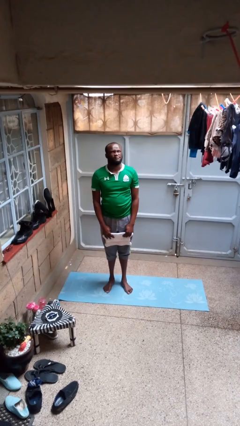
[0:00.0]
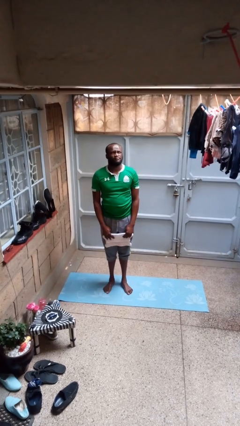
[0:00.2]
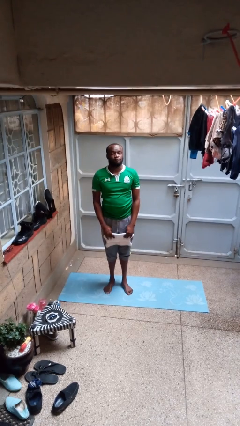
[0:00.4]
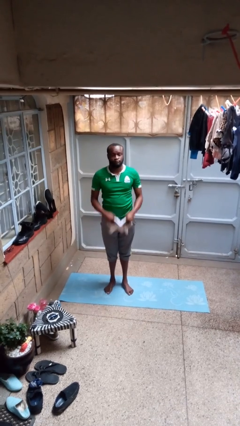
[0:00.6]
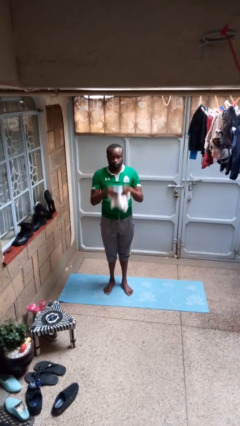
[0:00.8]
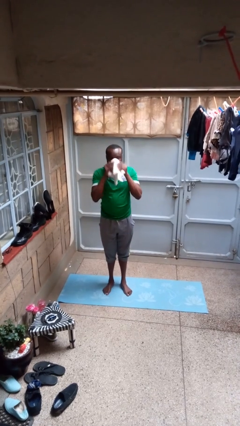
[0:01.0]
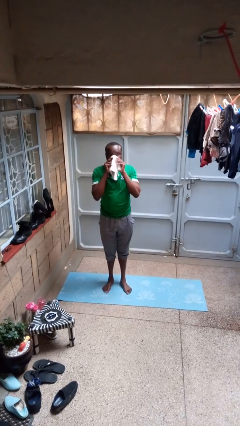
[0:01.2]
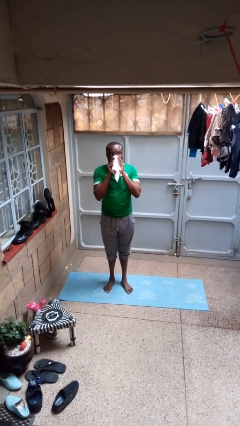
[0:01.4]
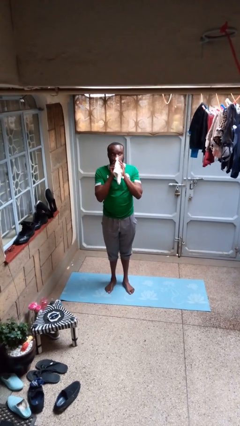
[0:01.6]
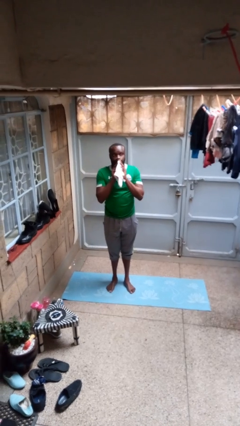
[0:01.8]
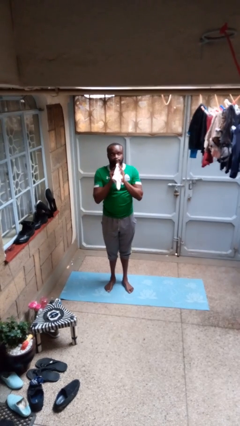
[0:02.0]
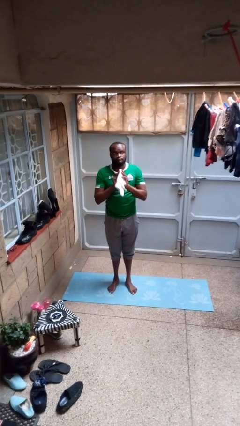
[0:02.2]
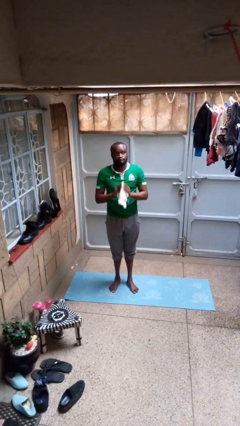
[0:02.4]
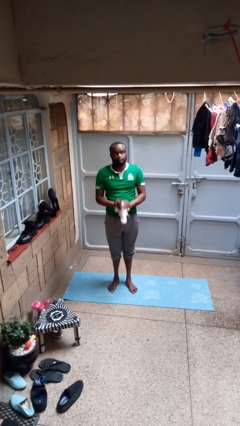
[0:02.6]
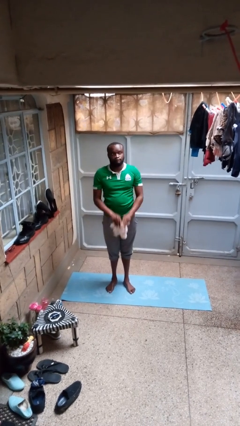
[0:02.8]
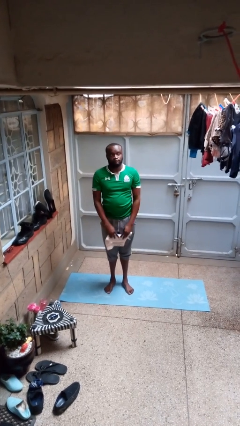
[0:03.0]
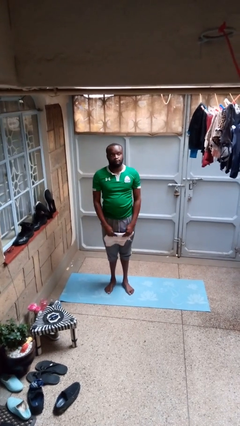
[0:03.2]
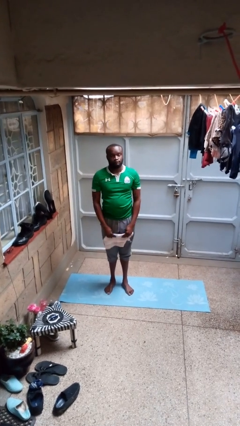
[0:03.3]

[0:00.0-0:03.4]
person wipes mouth with napkin

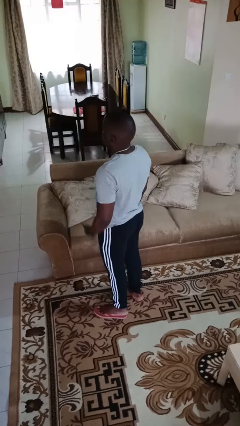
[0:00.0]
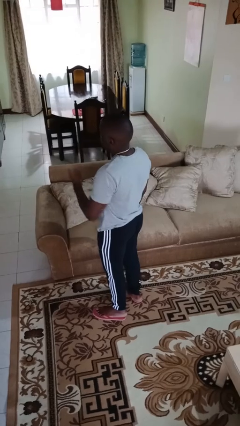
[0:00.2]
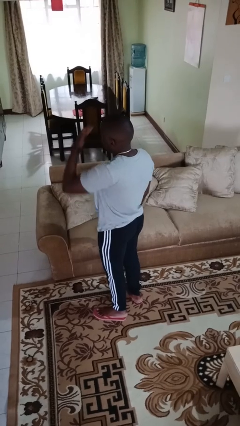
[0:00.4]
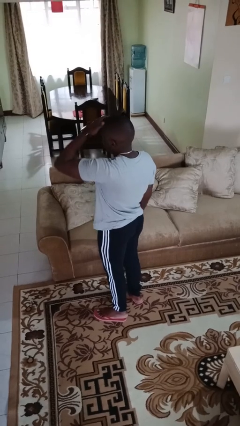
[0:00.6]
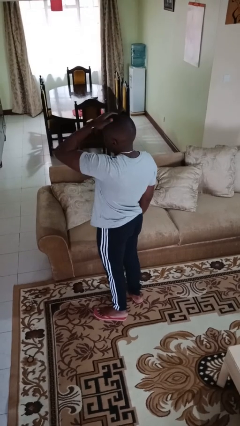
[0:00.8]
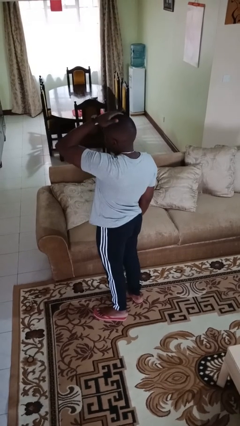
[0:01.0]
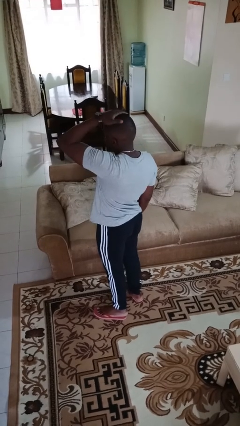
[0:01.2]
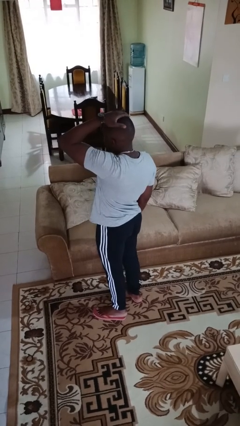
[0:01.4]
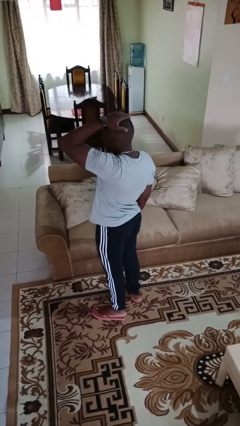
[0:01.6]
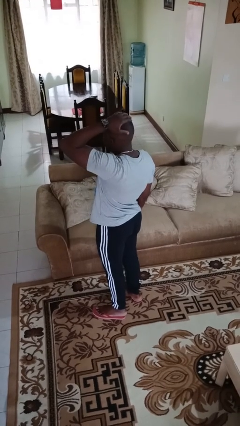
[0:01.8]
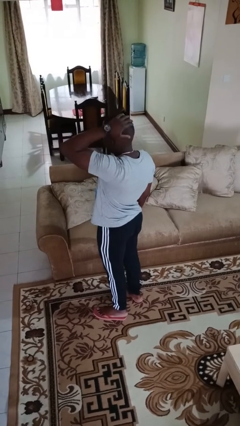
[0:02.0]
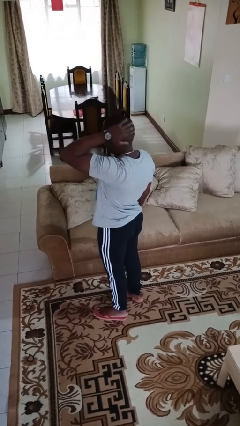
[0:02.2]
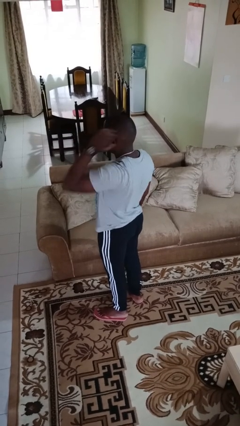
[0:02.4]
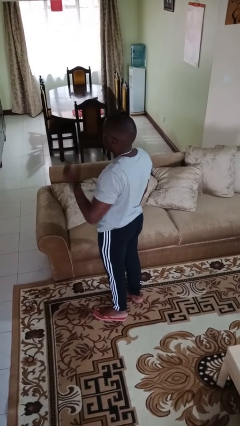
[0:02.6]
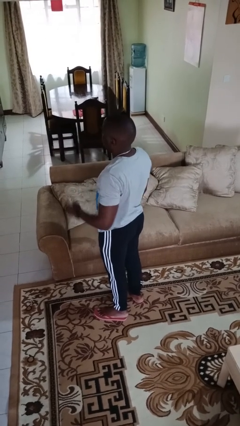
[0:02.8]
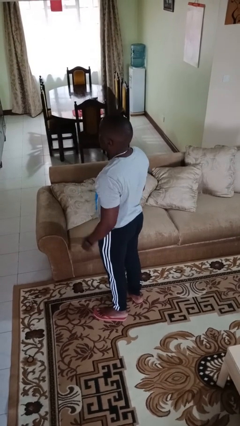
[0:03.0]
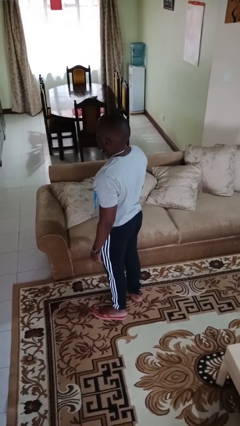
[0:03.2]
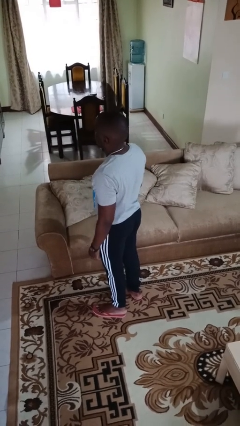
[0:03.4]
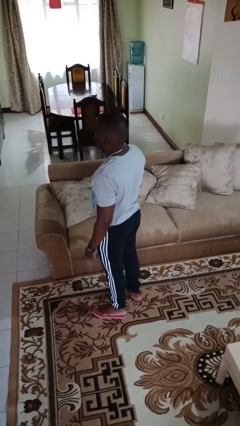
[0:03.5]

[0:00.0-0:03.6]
person strokes hair

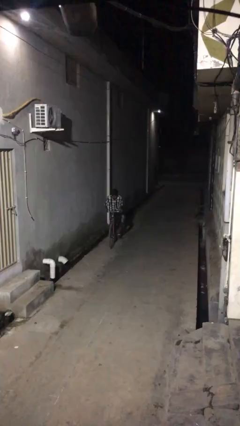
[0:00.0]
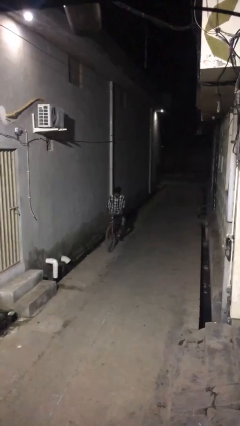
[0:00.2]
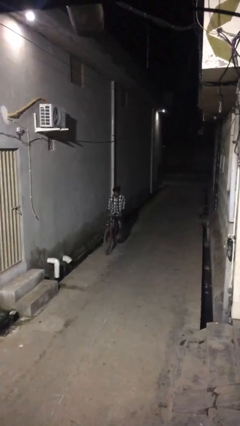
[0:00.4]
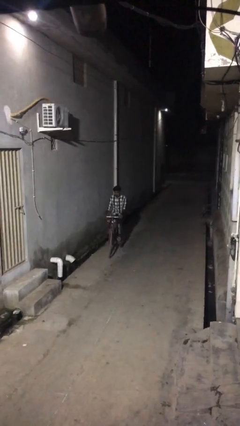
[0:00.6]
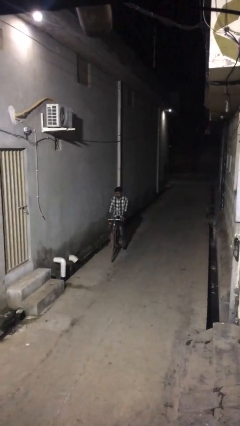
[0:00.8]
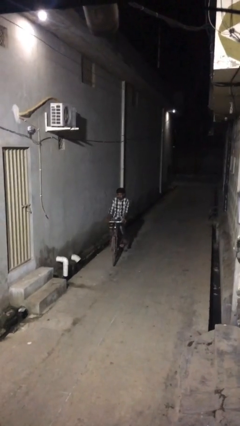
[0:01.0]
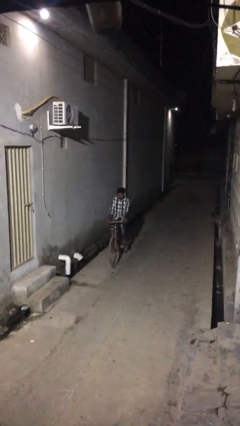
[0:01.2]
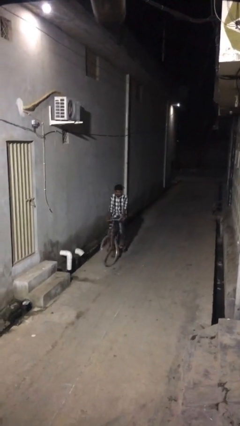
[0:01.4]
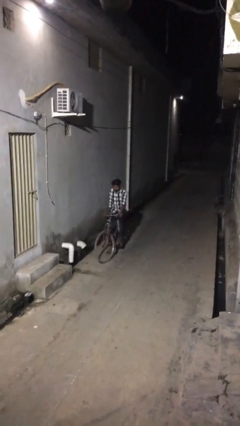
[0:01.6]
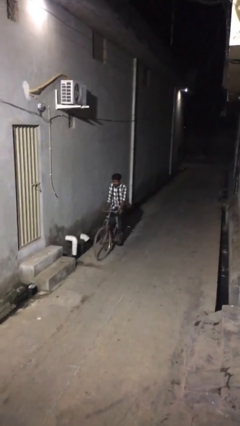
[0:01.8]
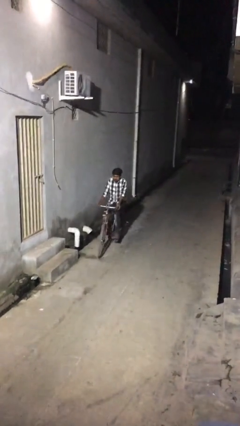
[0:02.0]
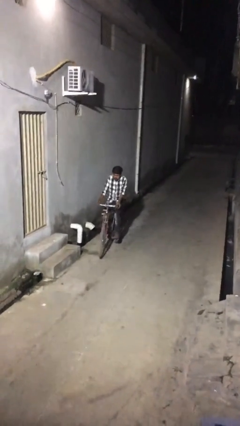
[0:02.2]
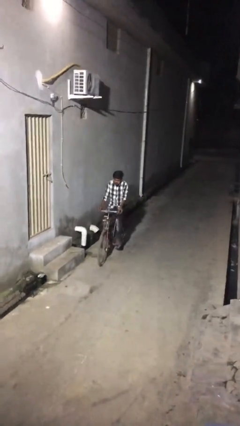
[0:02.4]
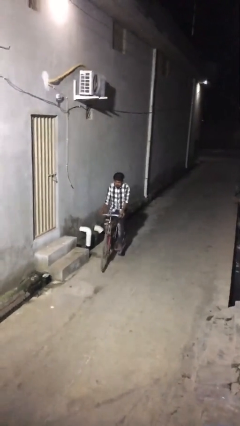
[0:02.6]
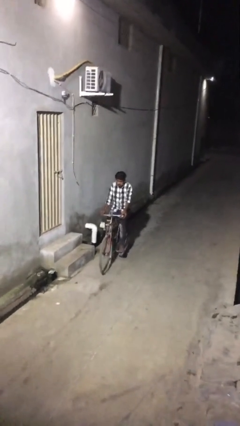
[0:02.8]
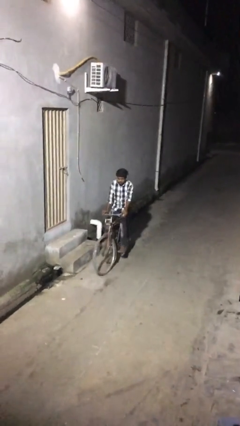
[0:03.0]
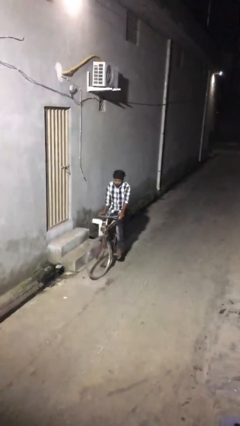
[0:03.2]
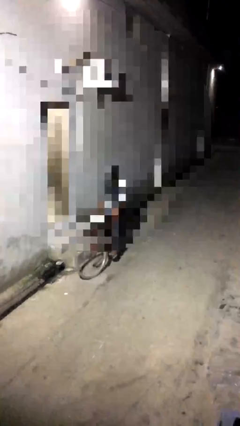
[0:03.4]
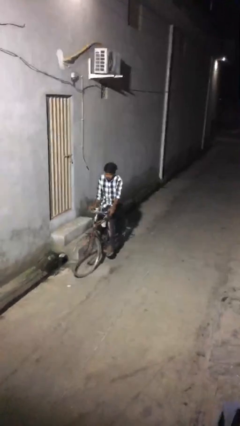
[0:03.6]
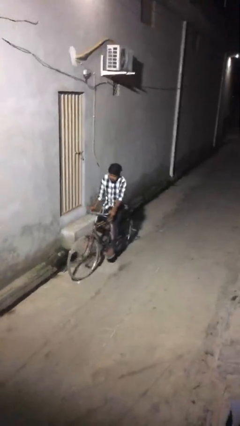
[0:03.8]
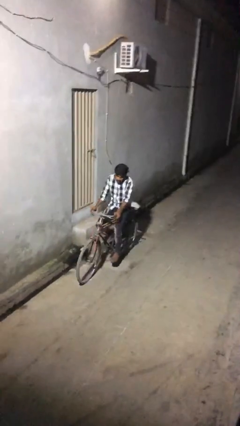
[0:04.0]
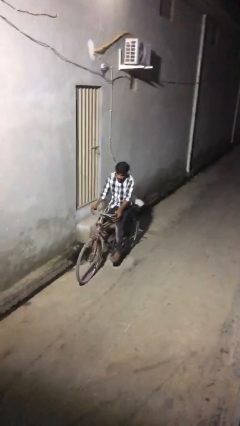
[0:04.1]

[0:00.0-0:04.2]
person rides bicycle

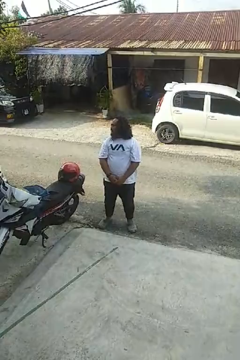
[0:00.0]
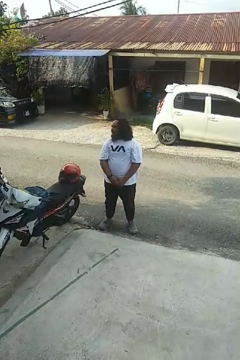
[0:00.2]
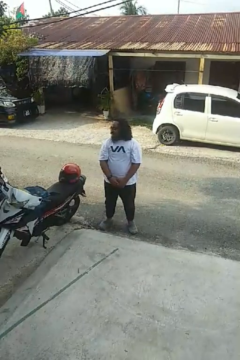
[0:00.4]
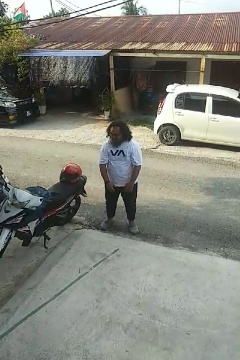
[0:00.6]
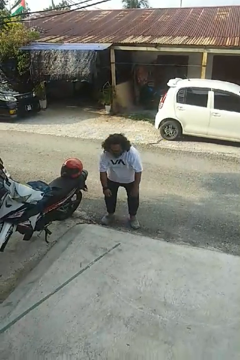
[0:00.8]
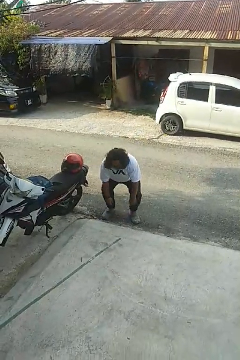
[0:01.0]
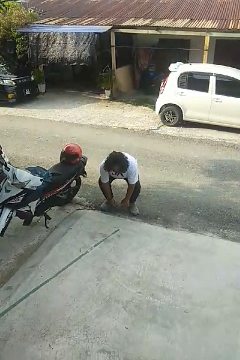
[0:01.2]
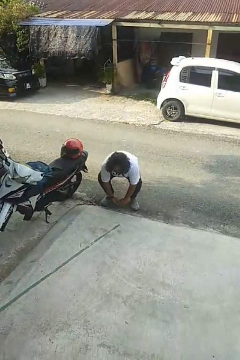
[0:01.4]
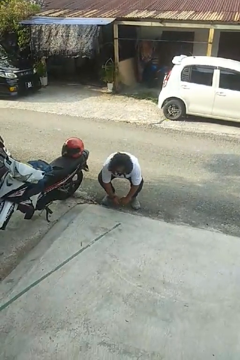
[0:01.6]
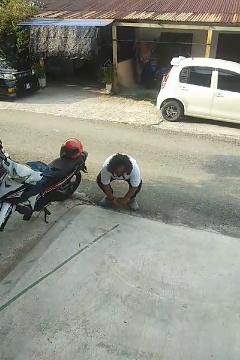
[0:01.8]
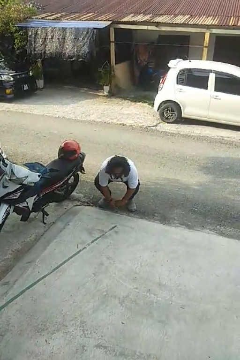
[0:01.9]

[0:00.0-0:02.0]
person squats

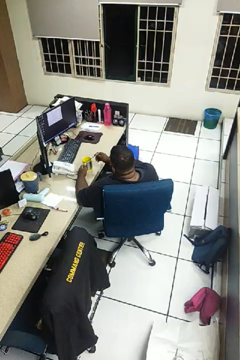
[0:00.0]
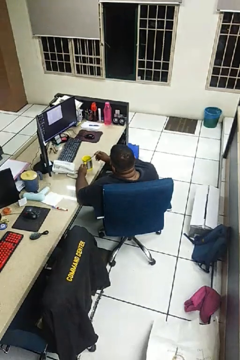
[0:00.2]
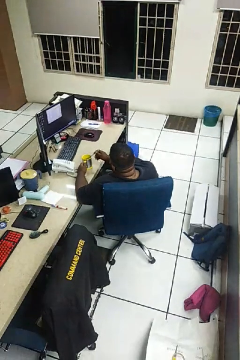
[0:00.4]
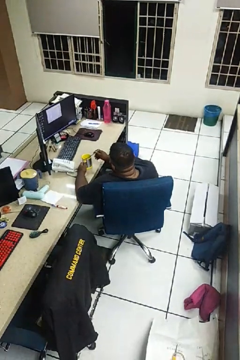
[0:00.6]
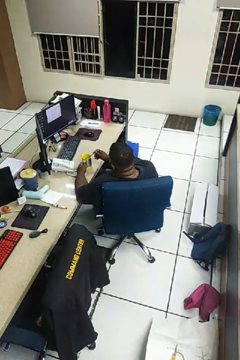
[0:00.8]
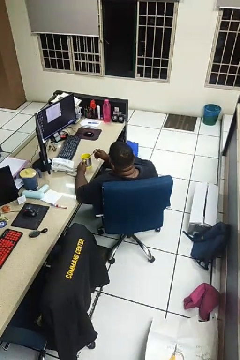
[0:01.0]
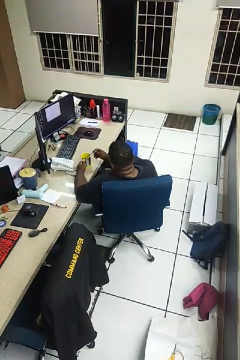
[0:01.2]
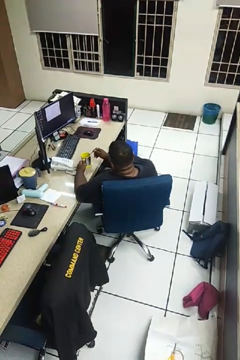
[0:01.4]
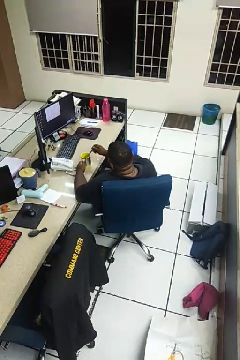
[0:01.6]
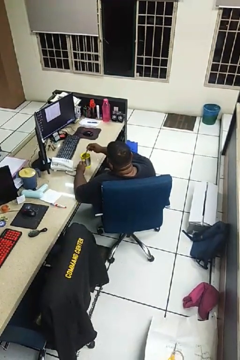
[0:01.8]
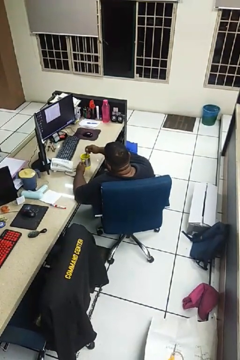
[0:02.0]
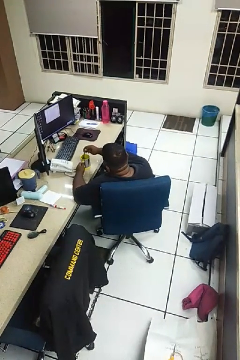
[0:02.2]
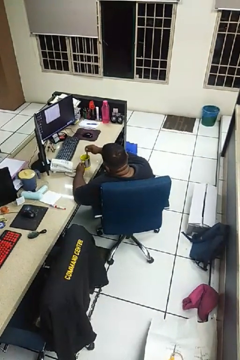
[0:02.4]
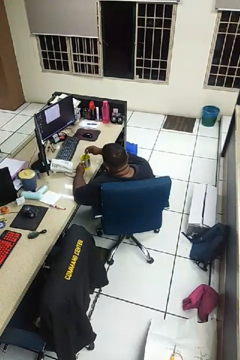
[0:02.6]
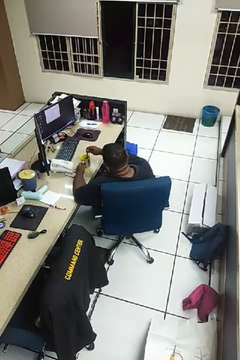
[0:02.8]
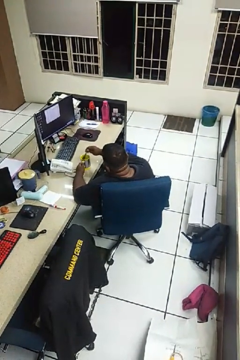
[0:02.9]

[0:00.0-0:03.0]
person stirs mug

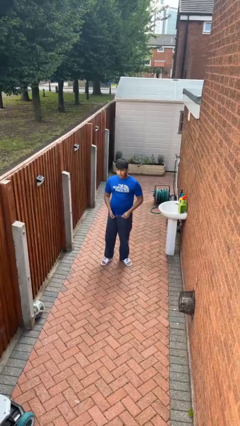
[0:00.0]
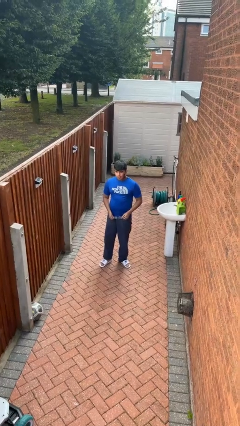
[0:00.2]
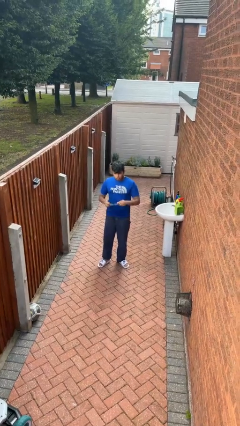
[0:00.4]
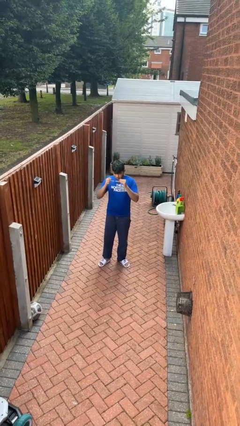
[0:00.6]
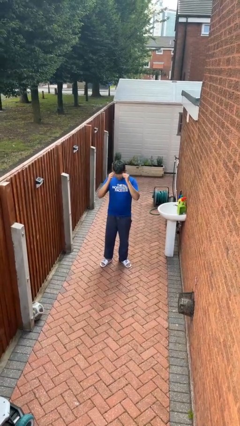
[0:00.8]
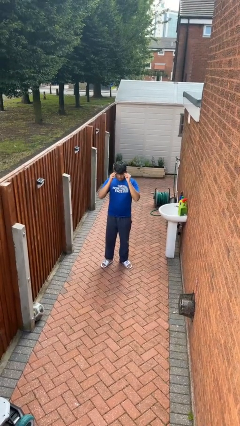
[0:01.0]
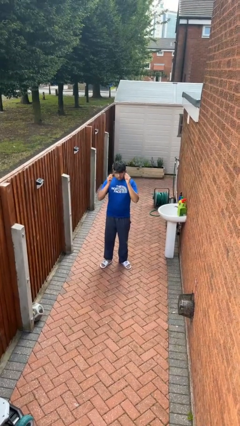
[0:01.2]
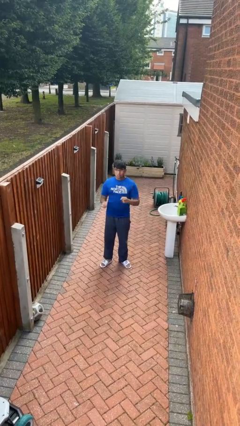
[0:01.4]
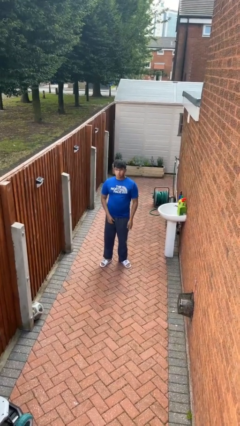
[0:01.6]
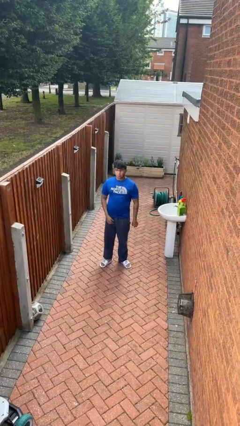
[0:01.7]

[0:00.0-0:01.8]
person puts on glasses
